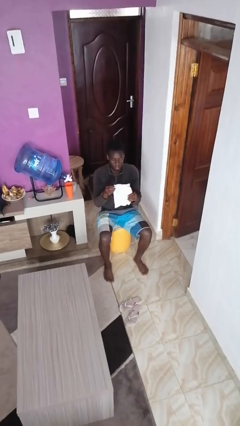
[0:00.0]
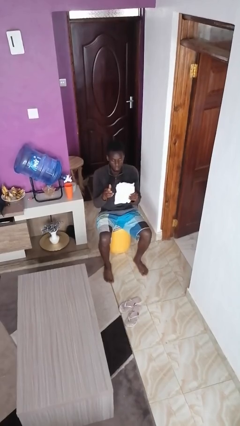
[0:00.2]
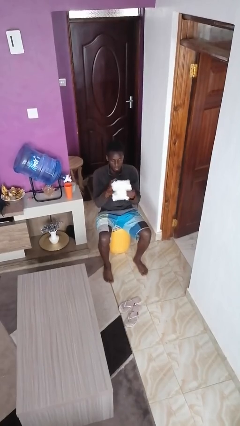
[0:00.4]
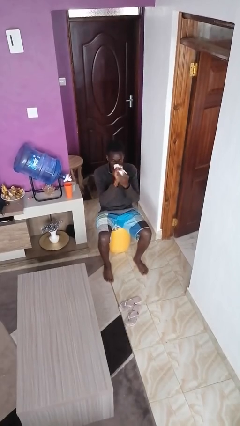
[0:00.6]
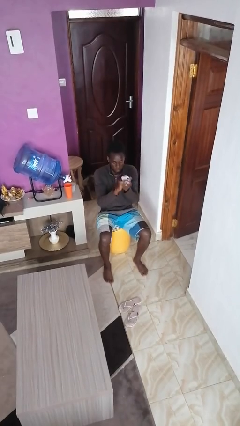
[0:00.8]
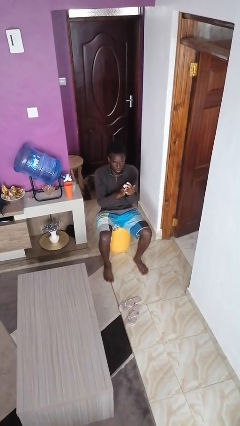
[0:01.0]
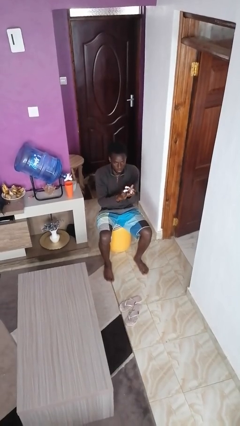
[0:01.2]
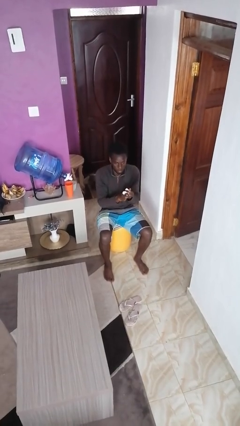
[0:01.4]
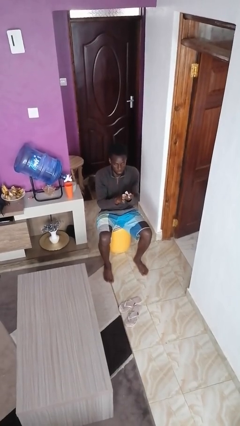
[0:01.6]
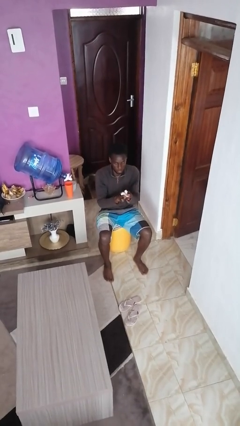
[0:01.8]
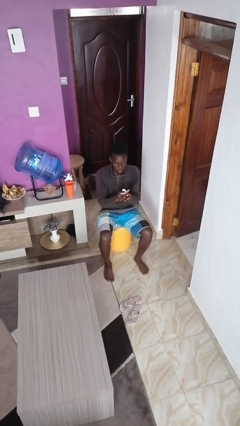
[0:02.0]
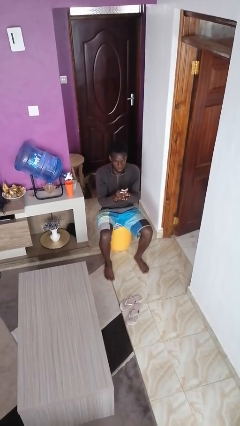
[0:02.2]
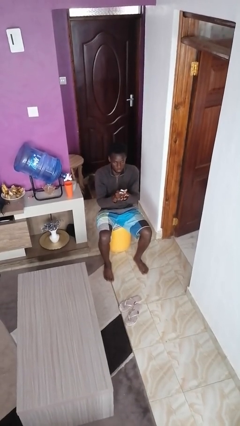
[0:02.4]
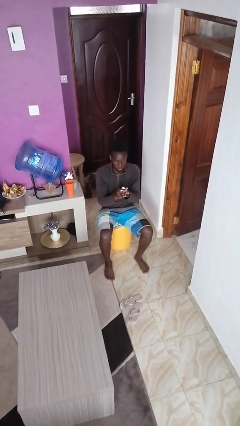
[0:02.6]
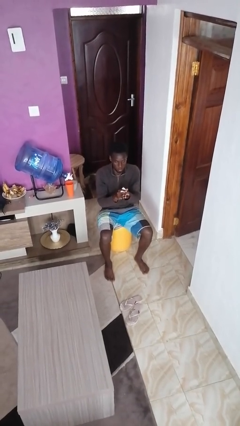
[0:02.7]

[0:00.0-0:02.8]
person crumples paper

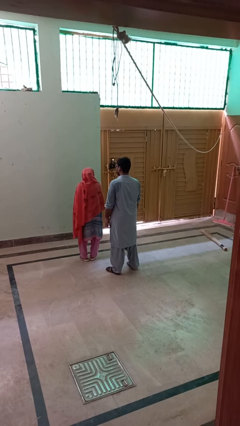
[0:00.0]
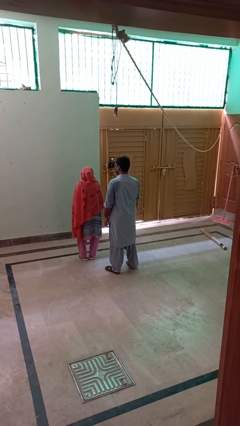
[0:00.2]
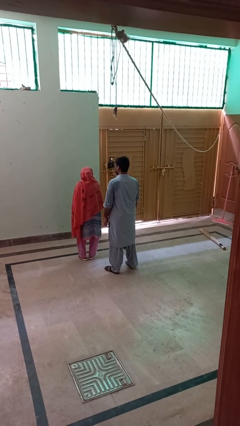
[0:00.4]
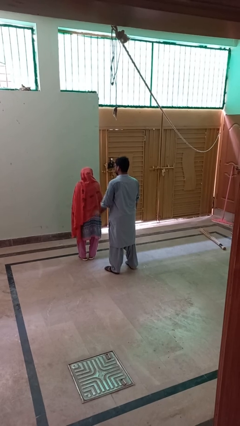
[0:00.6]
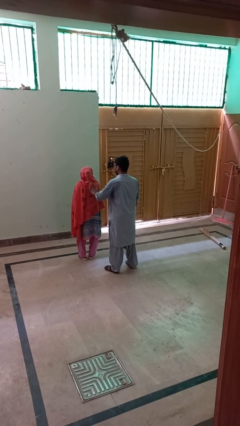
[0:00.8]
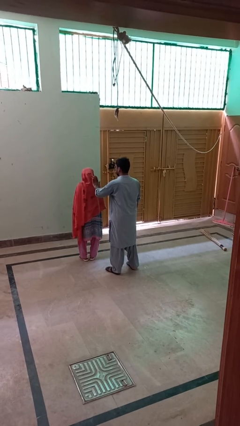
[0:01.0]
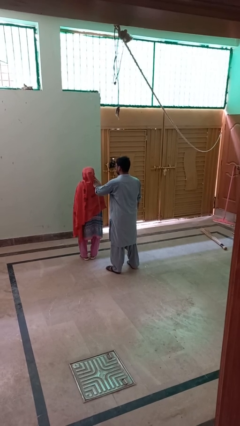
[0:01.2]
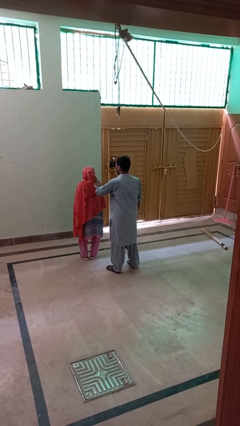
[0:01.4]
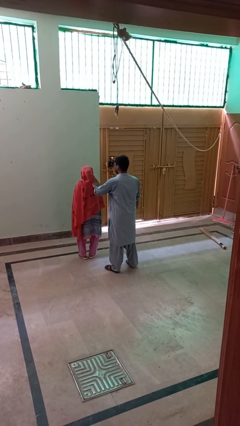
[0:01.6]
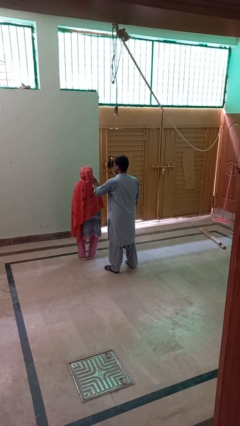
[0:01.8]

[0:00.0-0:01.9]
person touches back of person

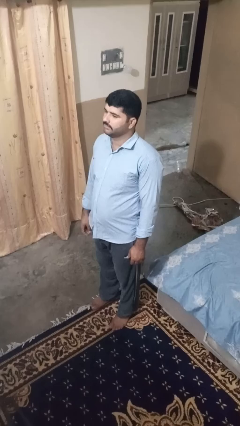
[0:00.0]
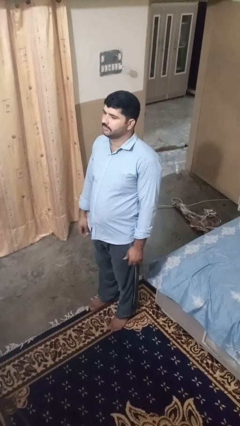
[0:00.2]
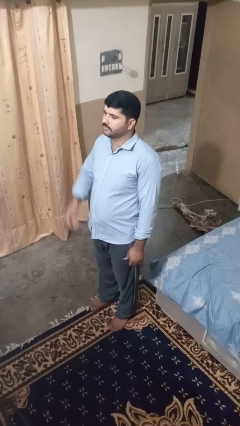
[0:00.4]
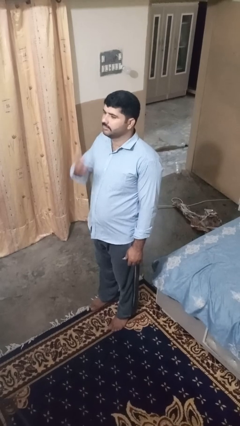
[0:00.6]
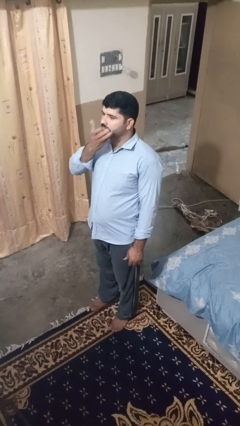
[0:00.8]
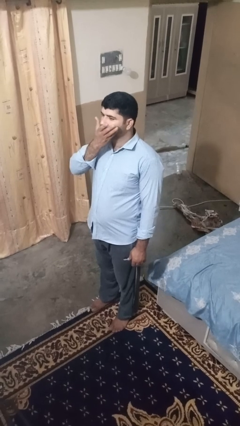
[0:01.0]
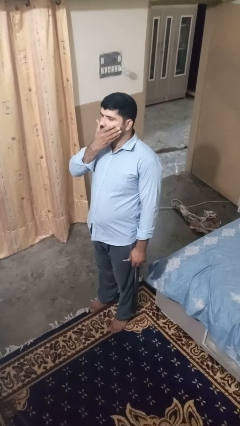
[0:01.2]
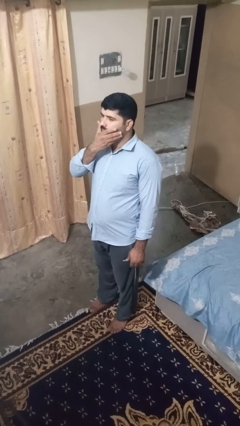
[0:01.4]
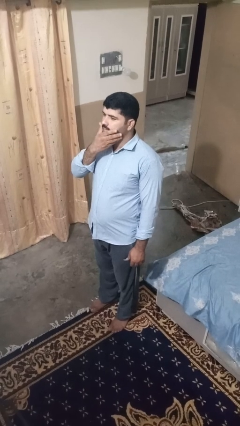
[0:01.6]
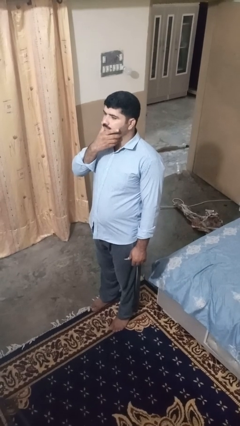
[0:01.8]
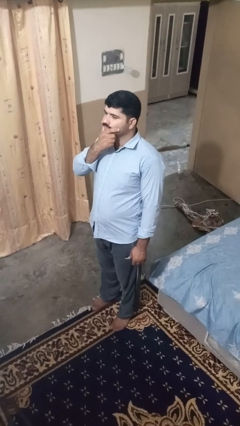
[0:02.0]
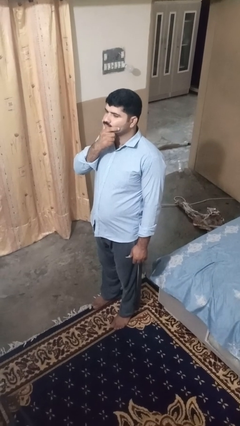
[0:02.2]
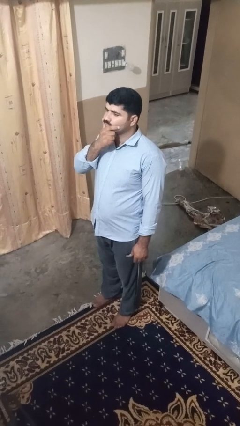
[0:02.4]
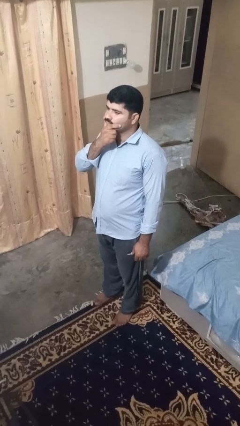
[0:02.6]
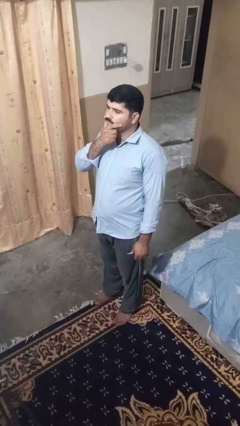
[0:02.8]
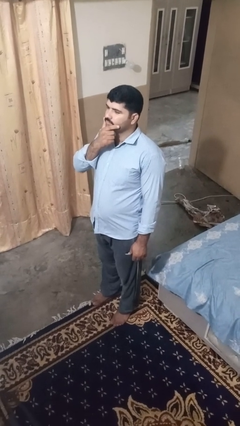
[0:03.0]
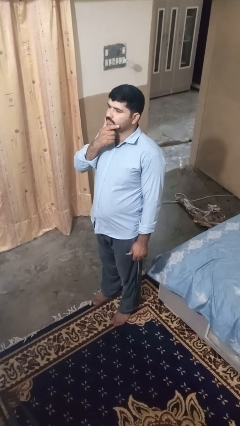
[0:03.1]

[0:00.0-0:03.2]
person strokes chin

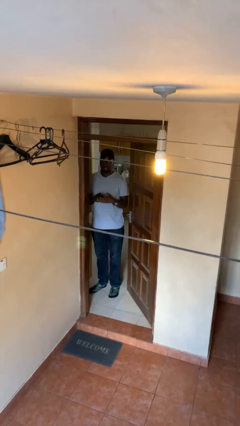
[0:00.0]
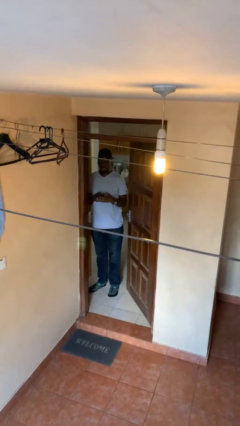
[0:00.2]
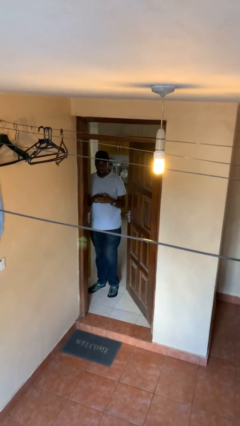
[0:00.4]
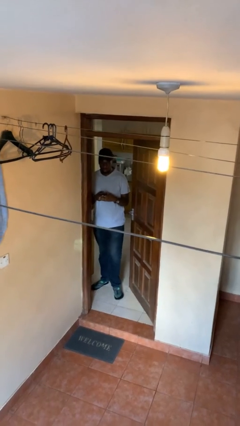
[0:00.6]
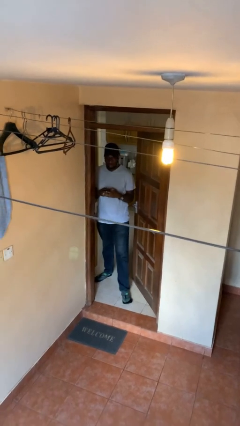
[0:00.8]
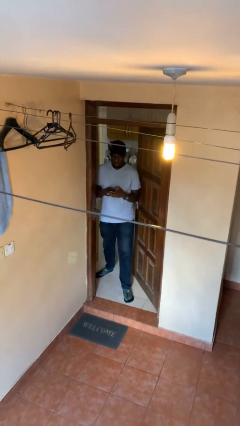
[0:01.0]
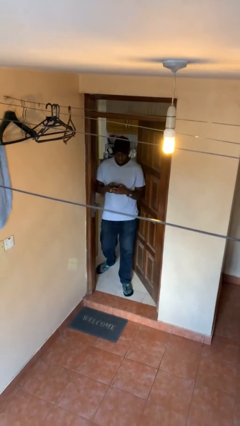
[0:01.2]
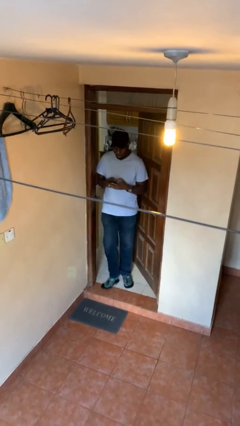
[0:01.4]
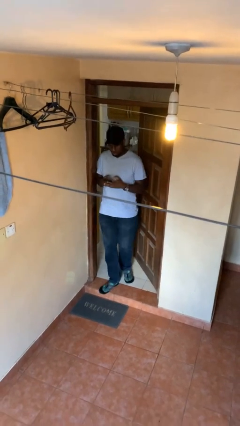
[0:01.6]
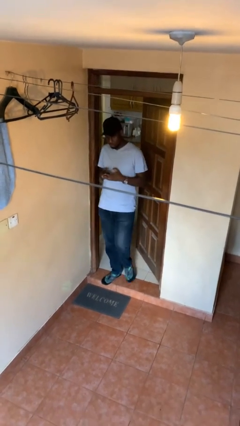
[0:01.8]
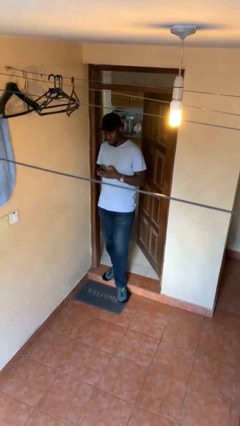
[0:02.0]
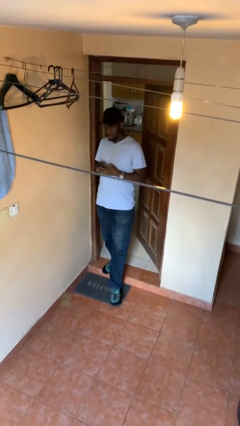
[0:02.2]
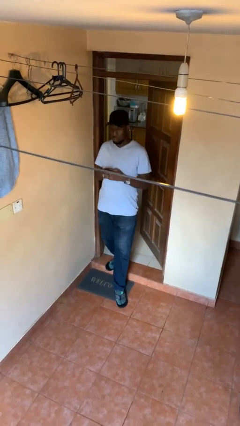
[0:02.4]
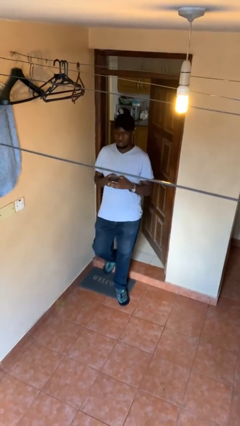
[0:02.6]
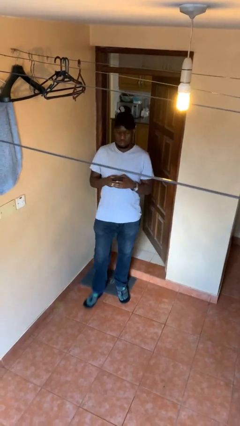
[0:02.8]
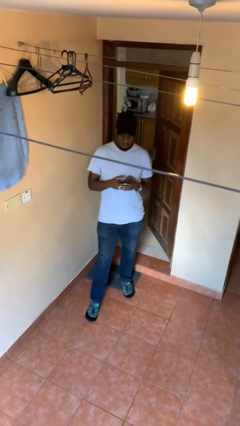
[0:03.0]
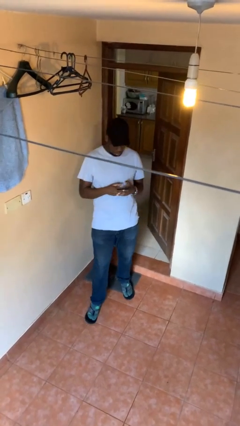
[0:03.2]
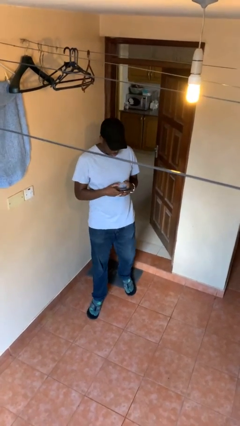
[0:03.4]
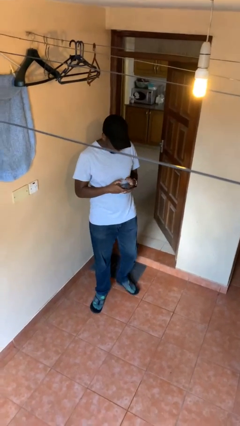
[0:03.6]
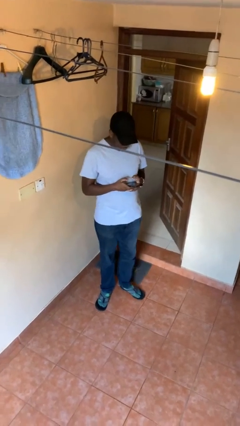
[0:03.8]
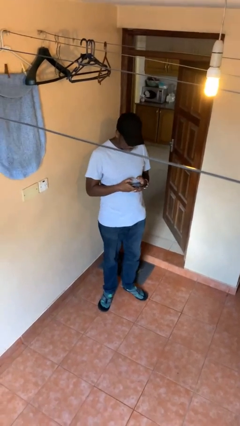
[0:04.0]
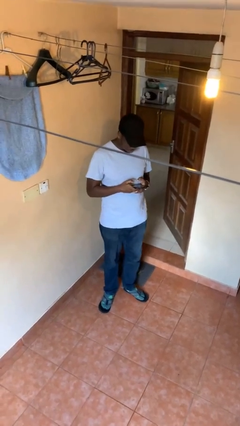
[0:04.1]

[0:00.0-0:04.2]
person enters scene through structure

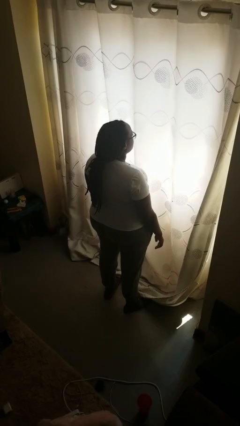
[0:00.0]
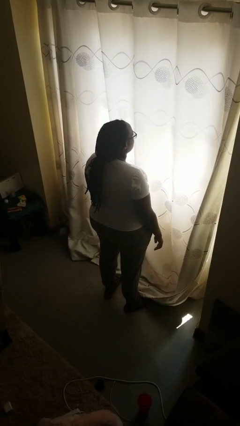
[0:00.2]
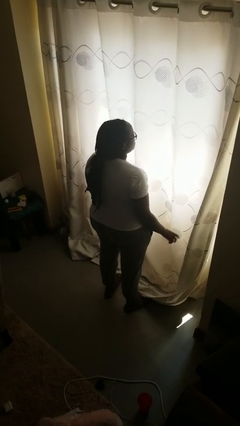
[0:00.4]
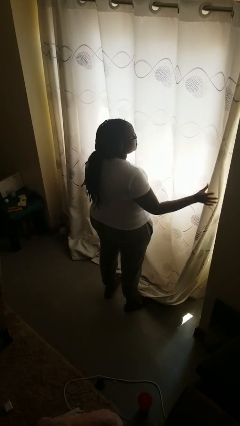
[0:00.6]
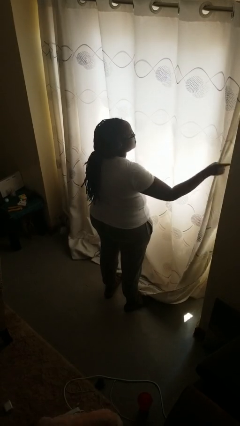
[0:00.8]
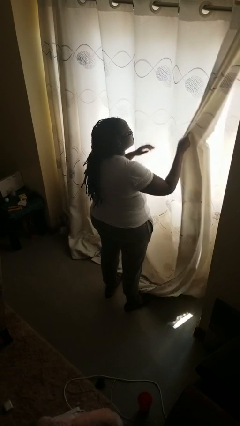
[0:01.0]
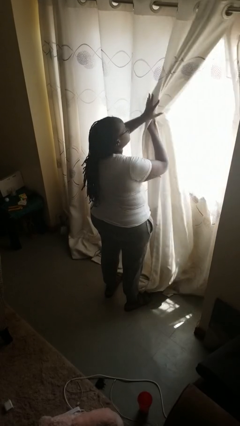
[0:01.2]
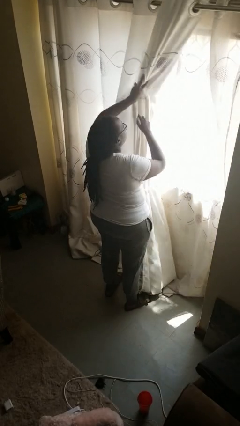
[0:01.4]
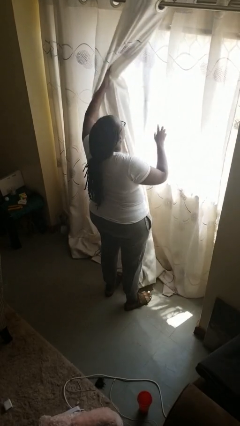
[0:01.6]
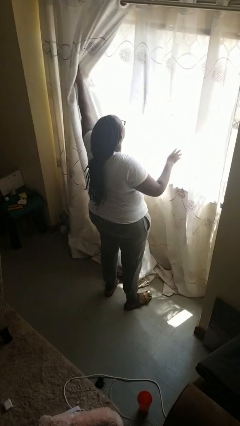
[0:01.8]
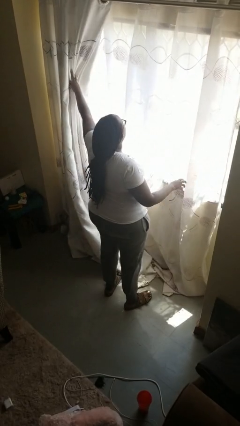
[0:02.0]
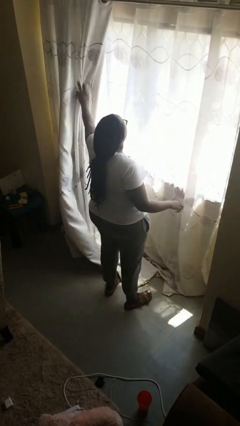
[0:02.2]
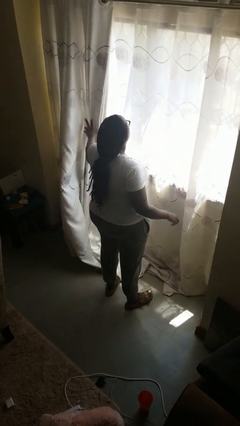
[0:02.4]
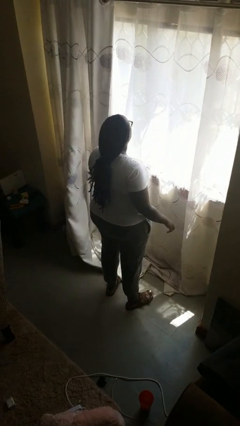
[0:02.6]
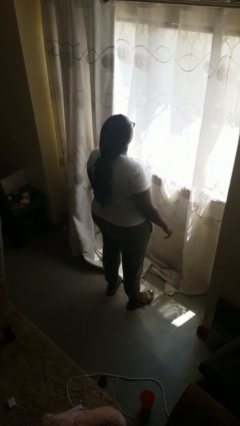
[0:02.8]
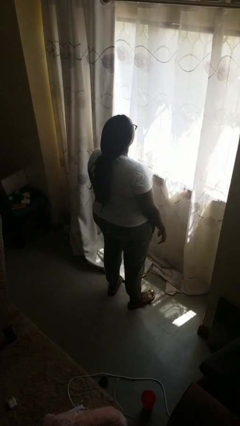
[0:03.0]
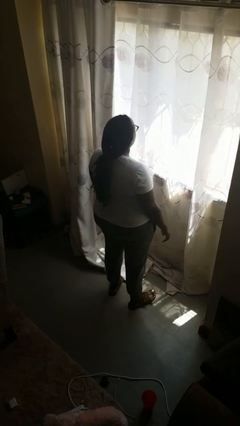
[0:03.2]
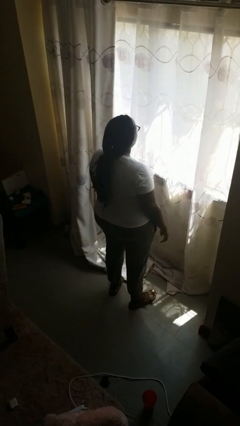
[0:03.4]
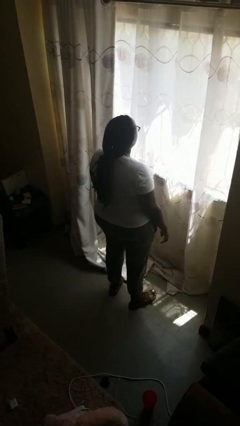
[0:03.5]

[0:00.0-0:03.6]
person opens curtains

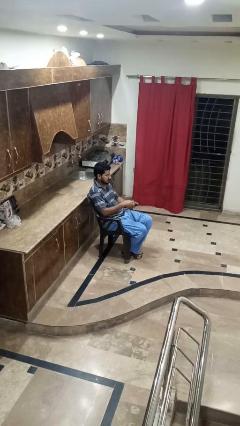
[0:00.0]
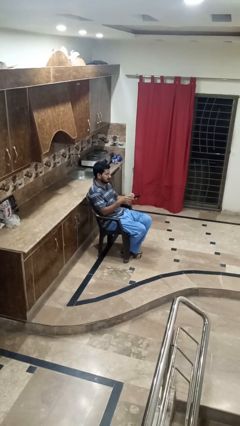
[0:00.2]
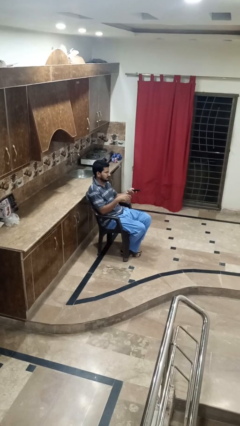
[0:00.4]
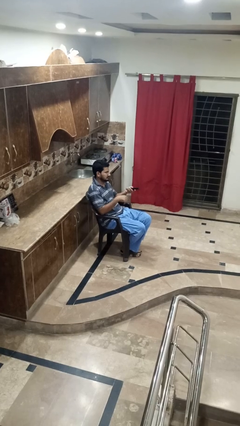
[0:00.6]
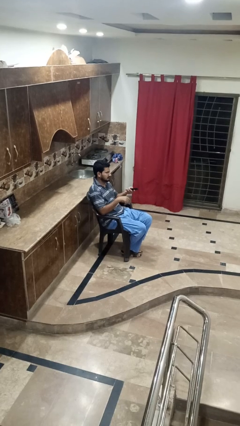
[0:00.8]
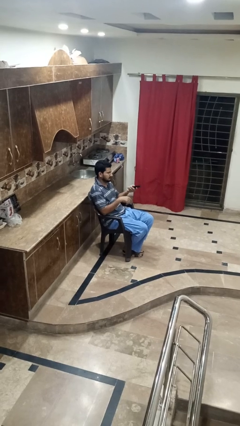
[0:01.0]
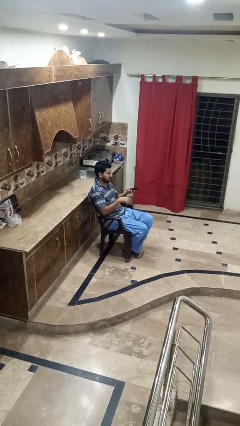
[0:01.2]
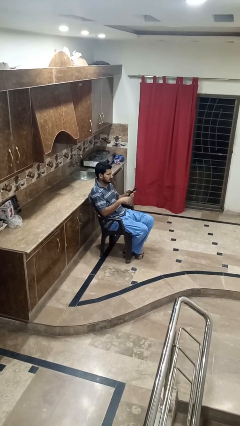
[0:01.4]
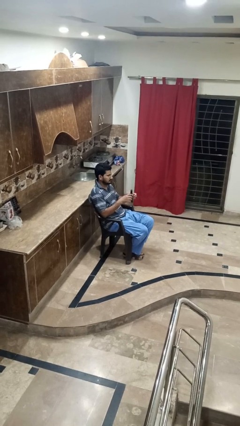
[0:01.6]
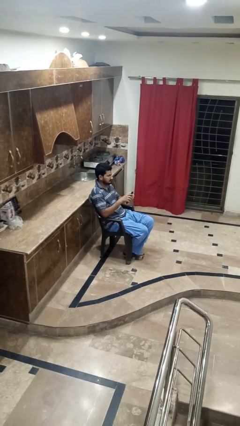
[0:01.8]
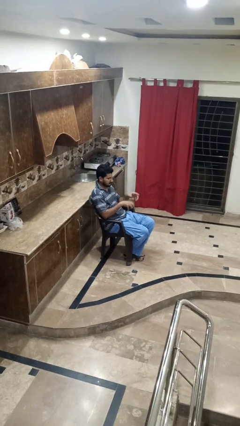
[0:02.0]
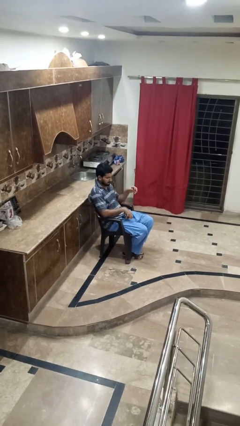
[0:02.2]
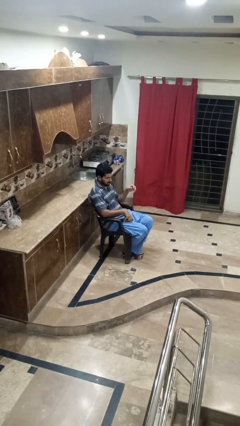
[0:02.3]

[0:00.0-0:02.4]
person uses television remote
